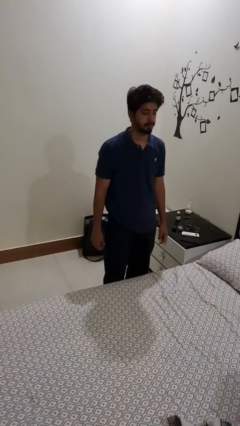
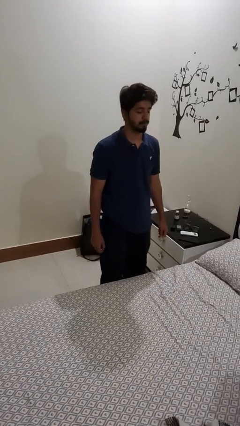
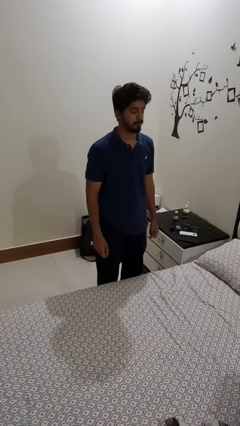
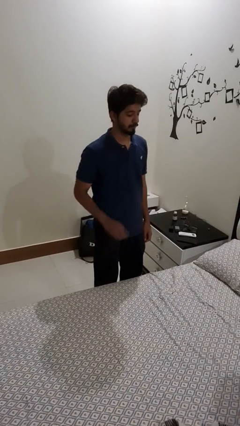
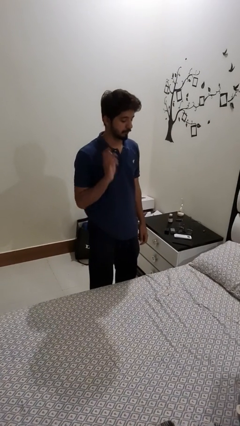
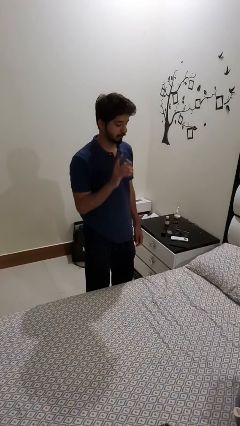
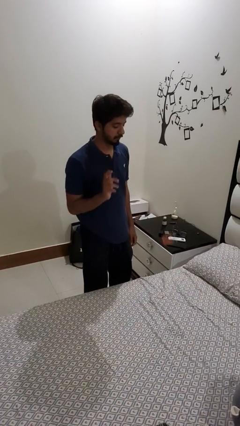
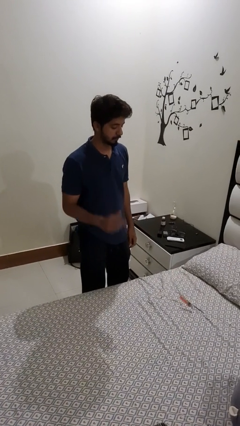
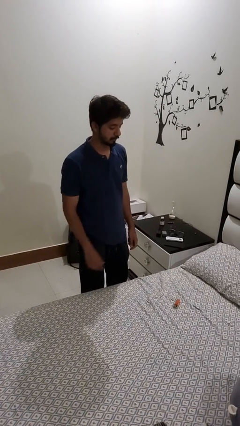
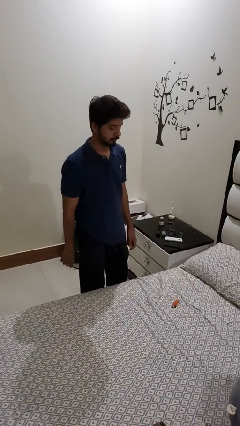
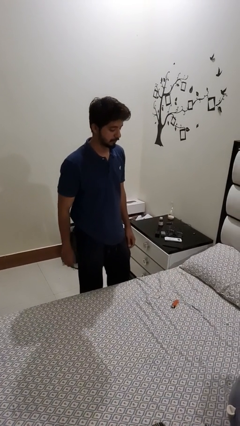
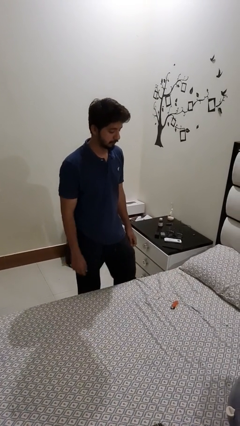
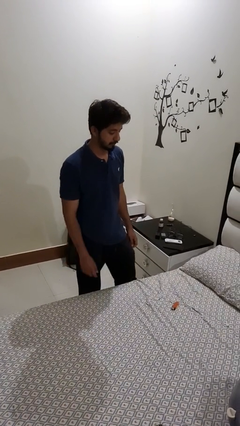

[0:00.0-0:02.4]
person throws object on bed

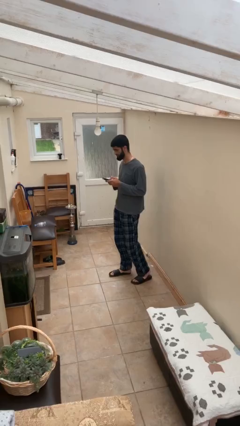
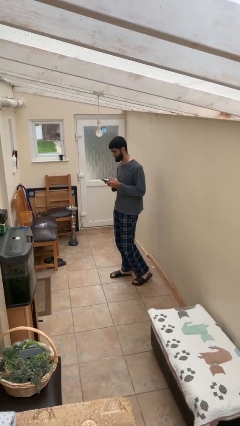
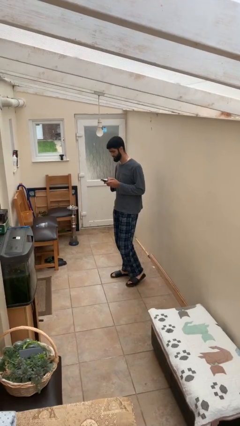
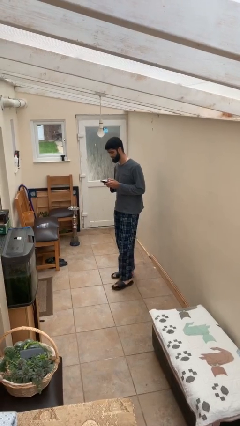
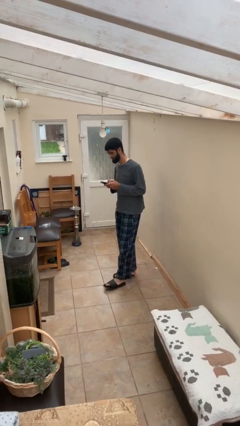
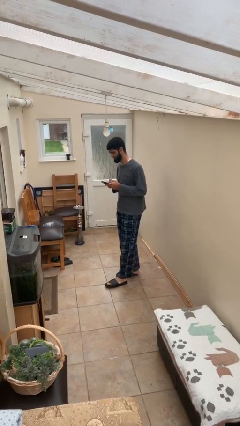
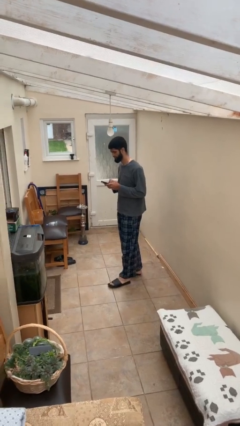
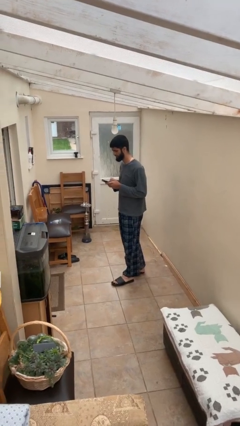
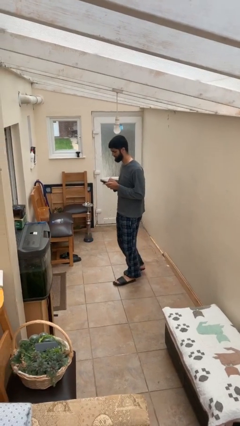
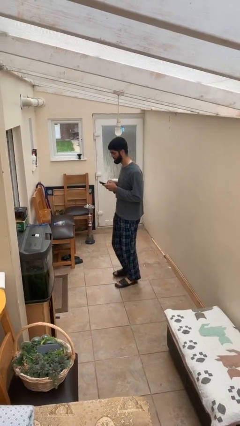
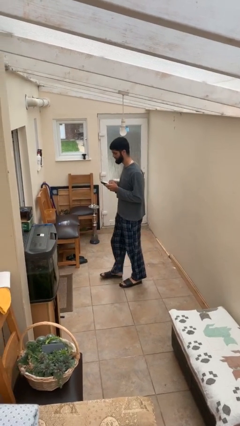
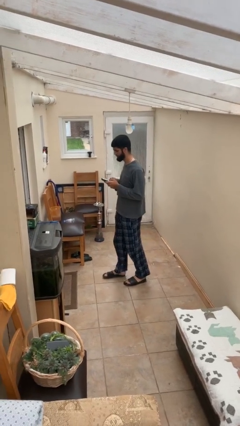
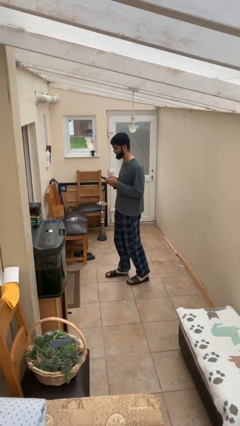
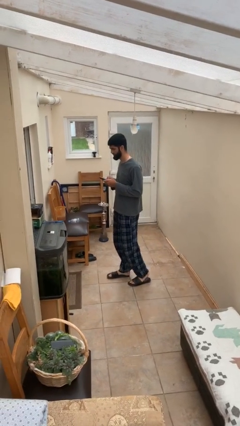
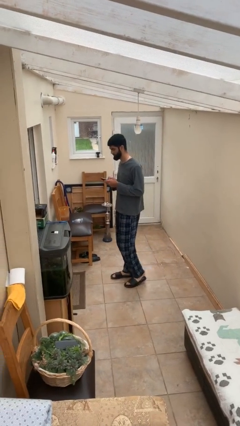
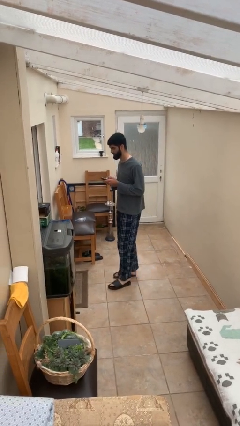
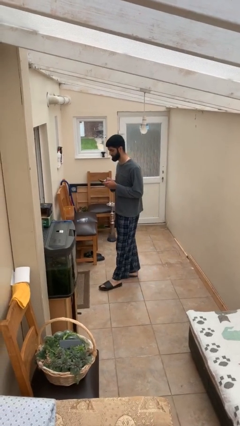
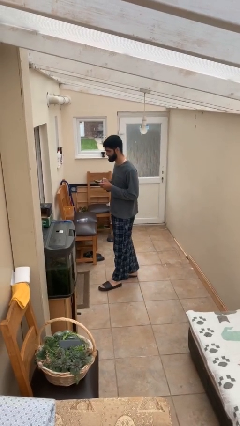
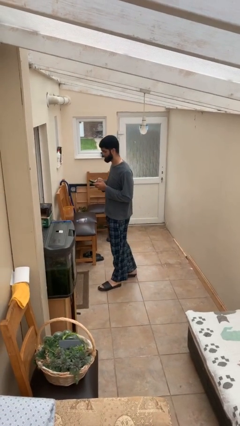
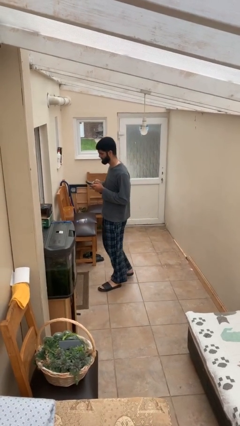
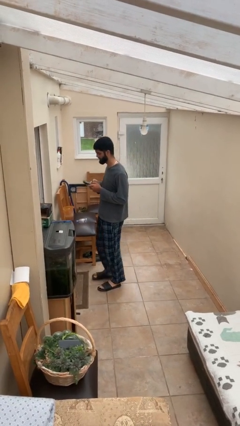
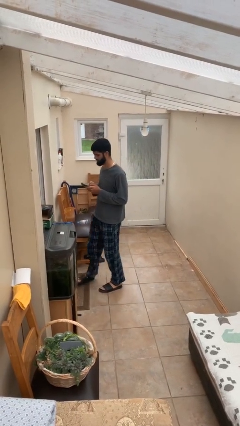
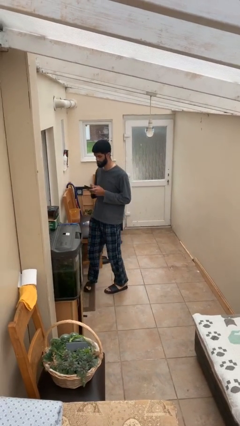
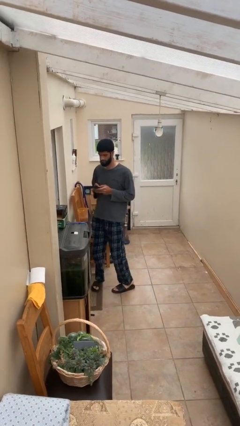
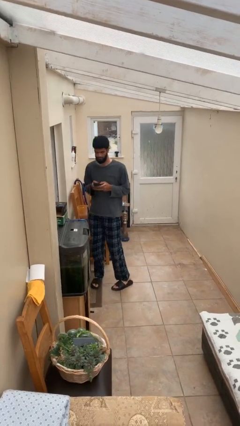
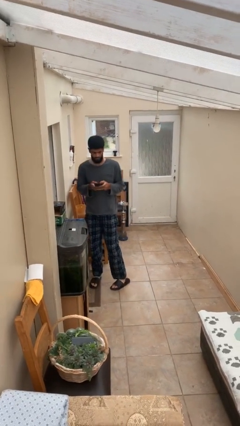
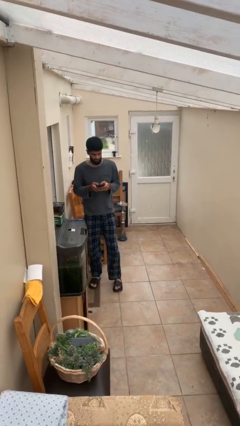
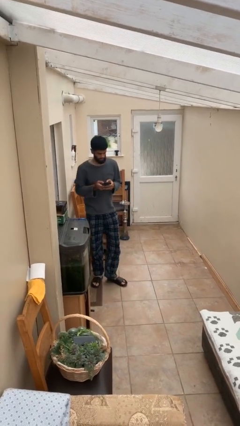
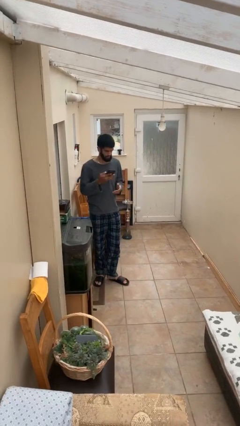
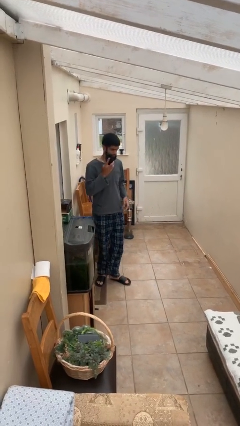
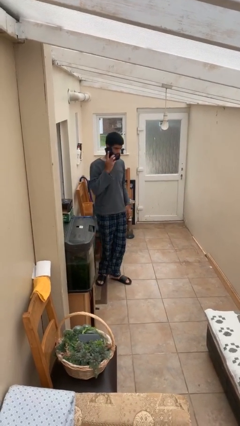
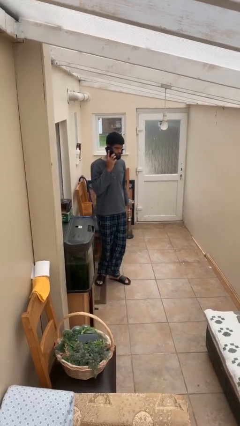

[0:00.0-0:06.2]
person texts on phone

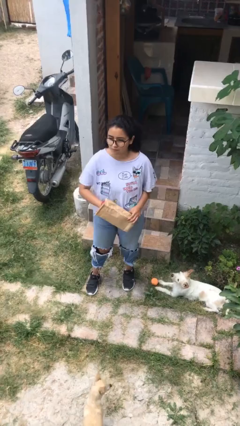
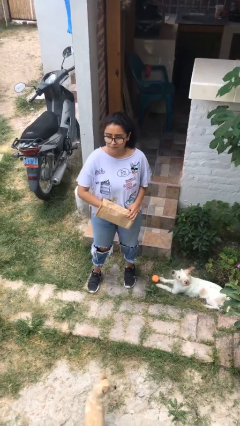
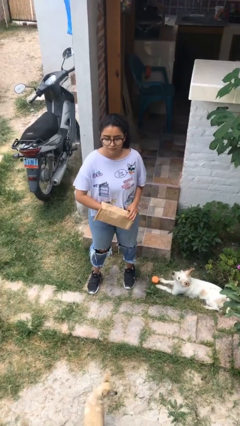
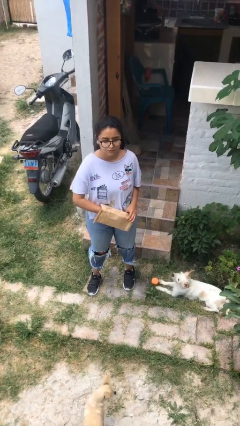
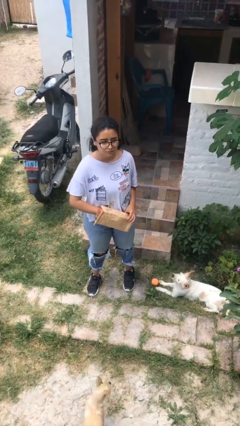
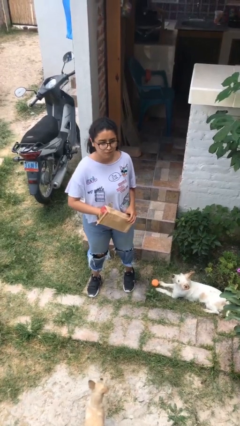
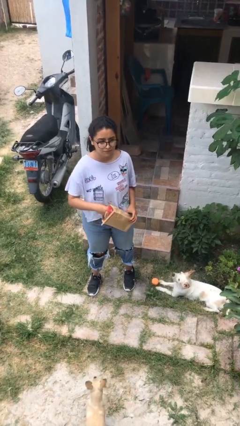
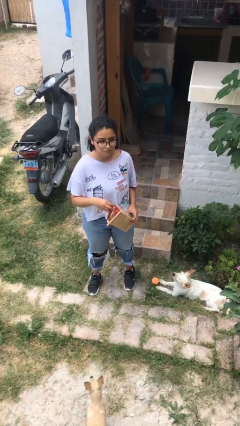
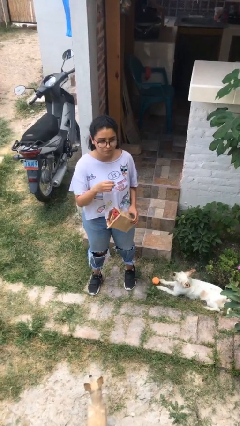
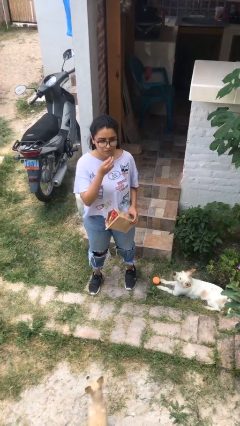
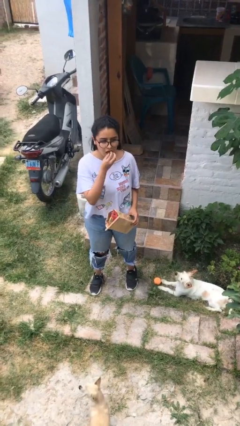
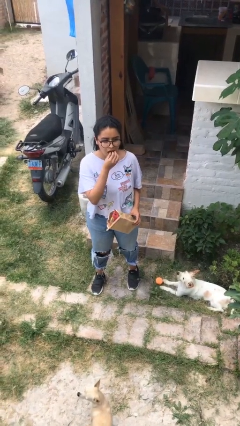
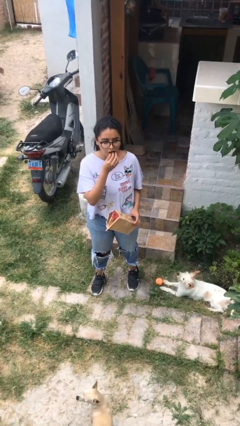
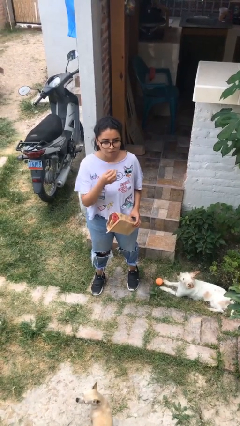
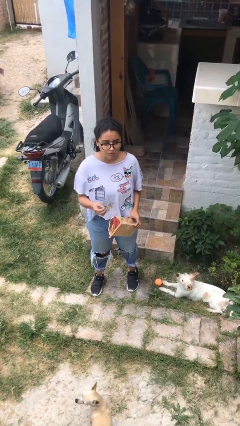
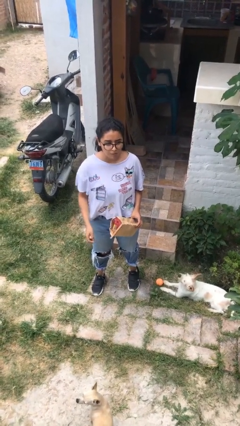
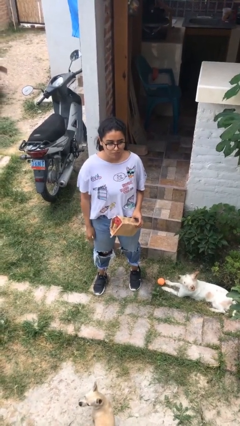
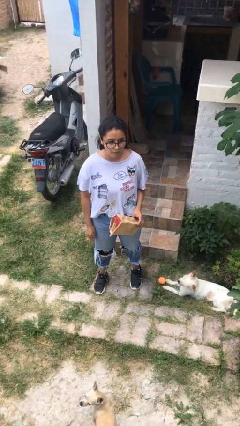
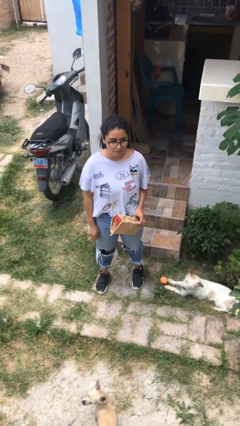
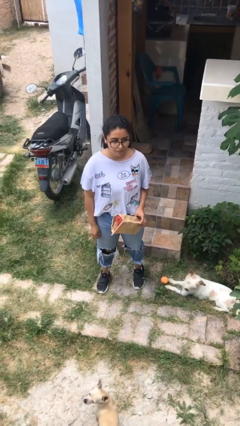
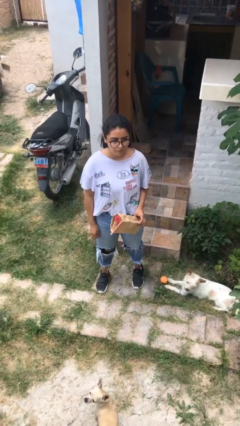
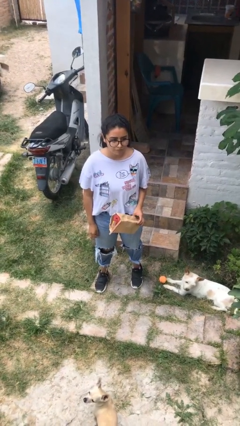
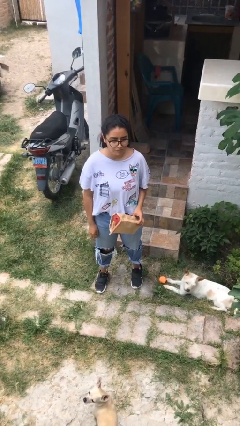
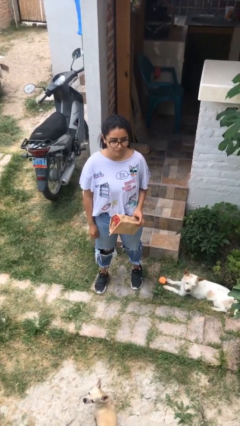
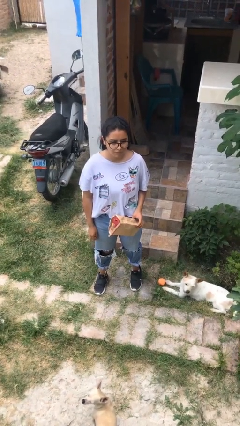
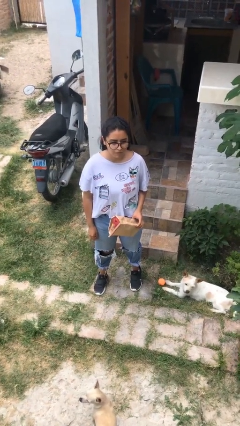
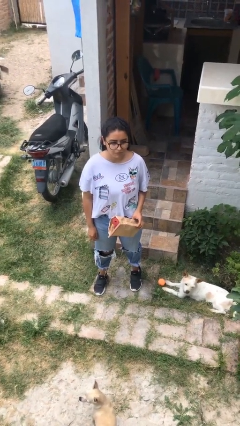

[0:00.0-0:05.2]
person eats snack from bag

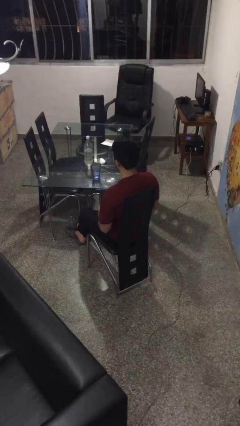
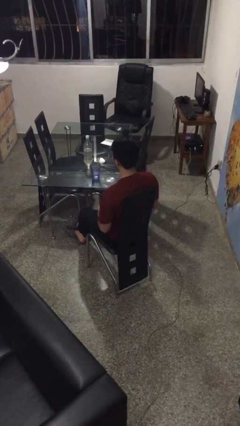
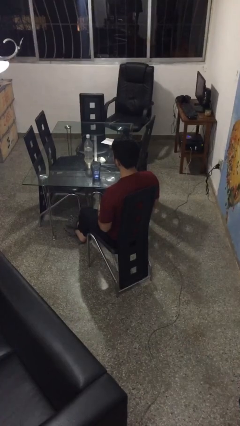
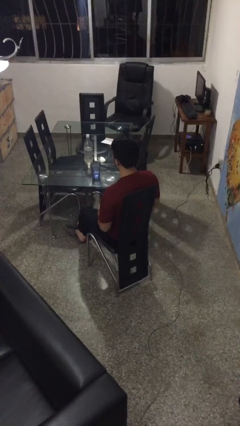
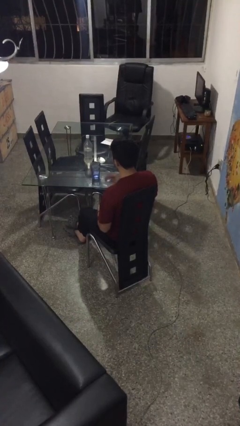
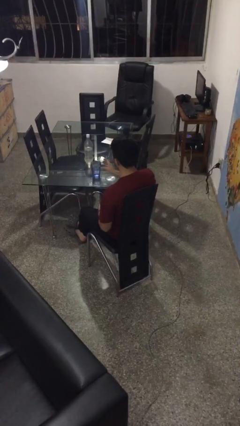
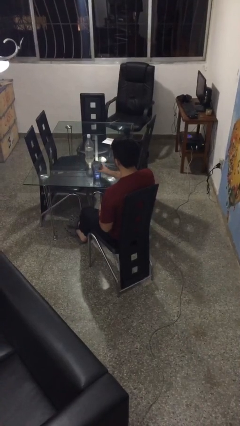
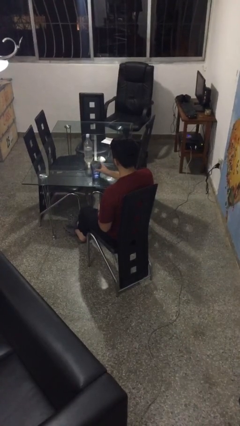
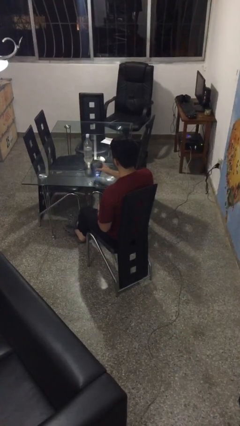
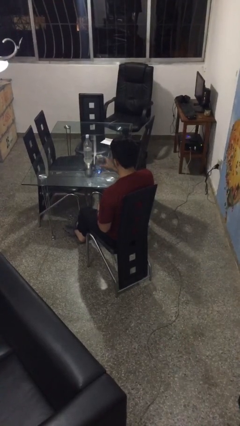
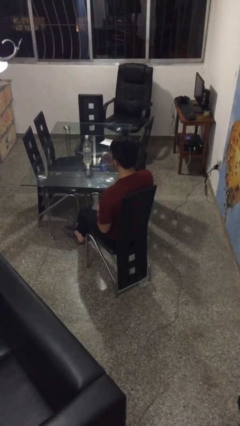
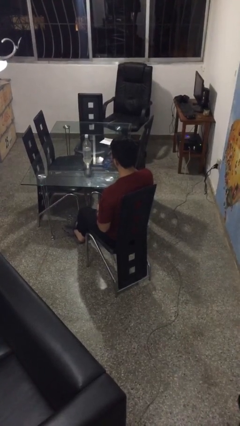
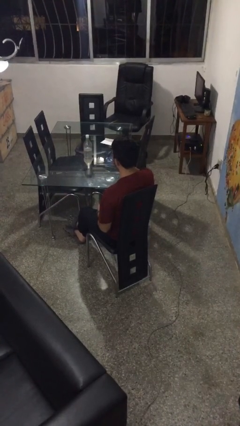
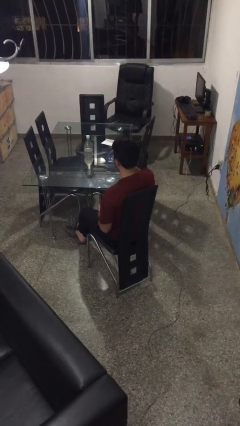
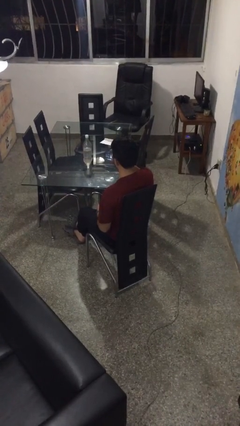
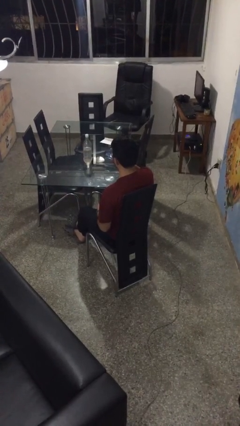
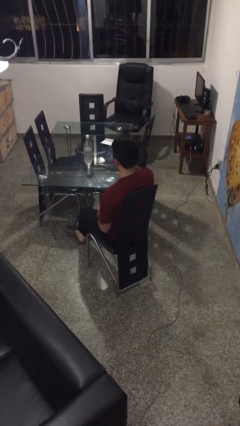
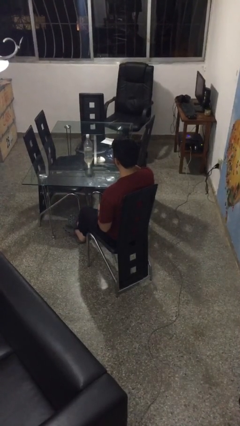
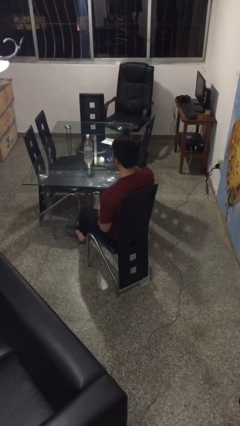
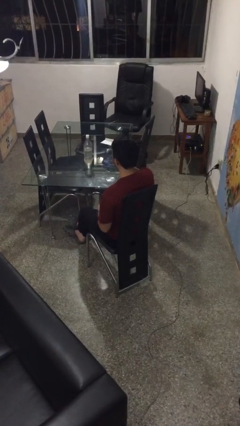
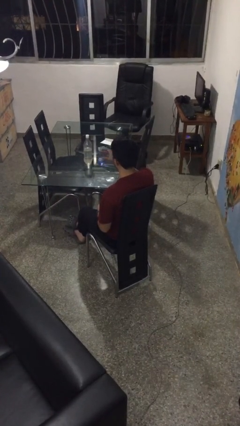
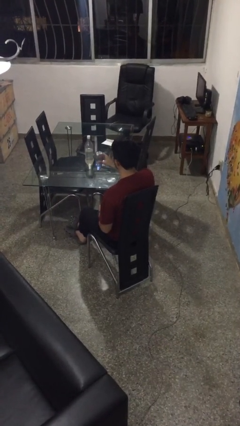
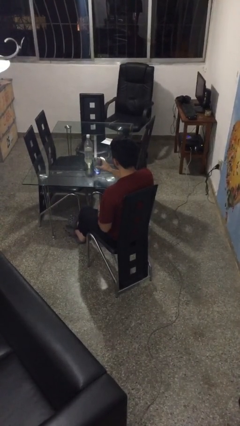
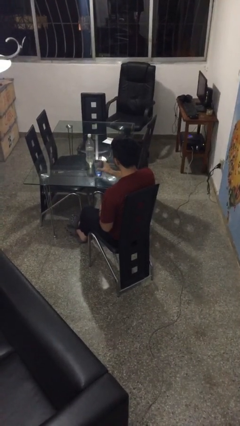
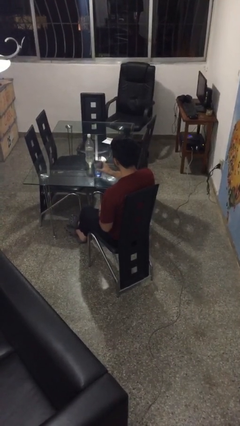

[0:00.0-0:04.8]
person drinks from cup
